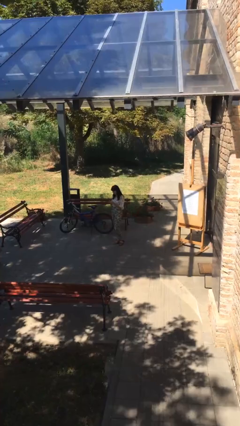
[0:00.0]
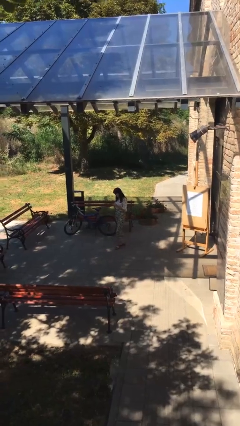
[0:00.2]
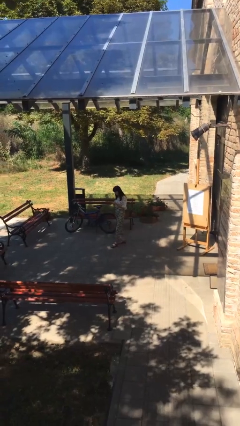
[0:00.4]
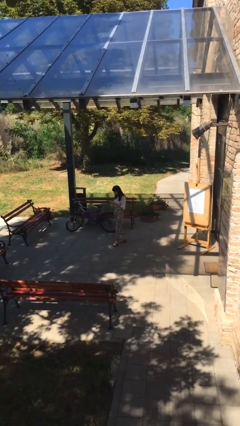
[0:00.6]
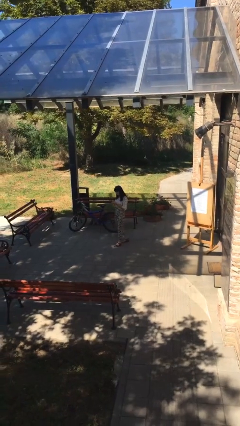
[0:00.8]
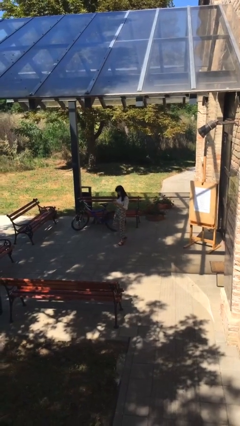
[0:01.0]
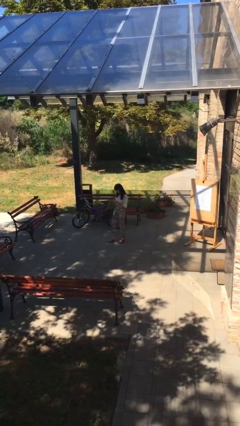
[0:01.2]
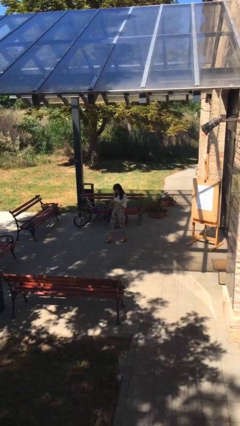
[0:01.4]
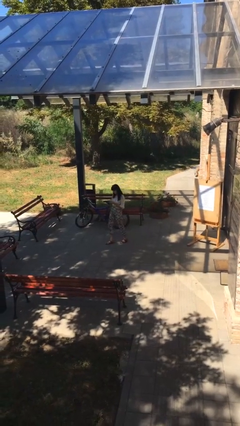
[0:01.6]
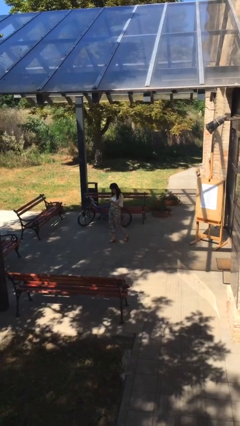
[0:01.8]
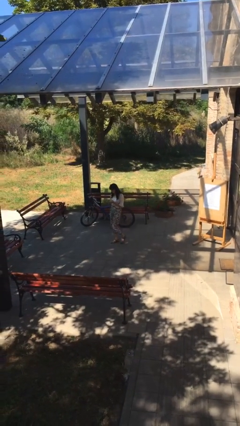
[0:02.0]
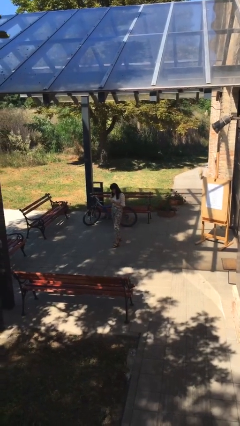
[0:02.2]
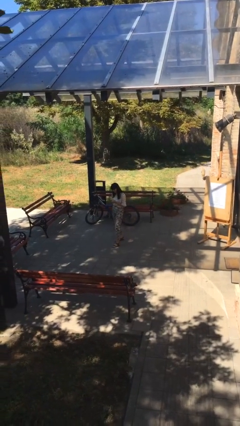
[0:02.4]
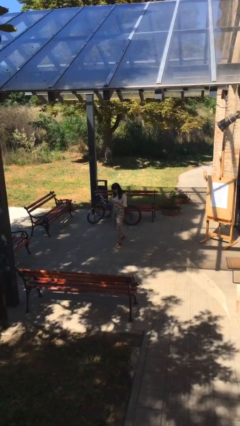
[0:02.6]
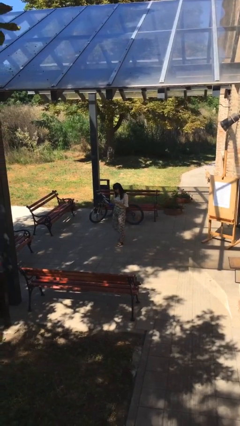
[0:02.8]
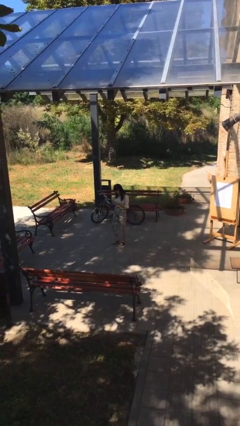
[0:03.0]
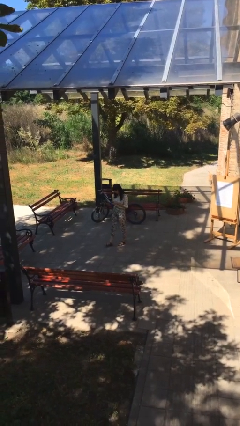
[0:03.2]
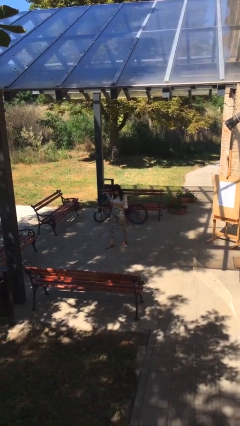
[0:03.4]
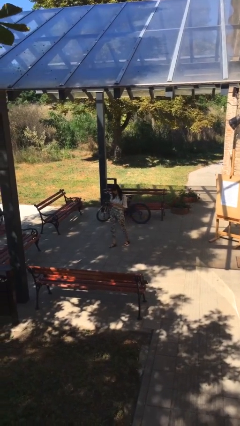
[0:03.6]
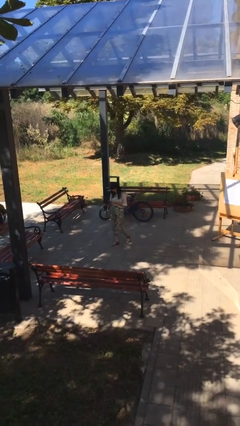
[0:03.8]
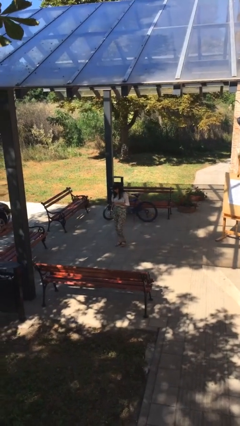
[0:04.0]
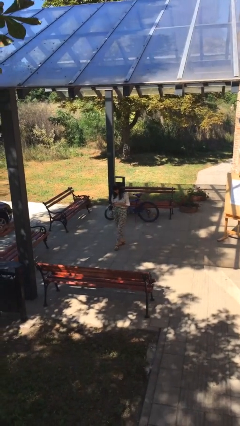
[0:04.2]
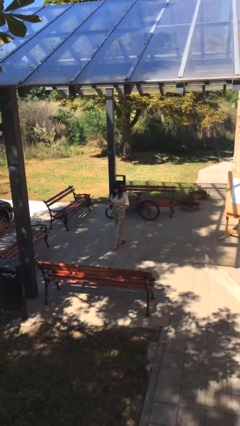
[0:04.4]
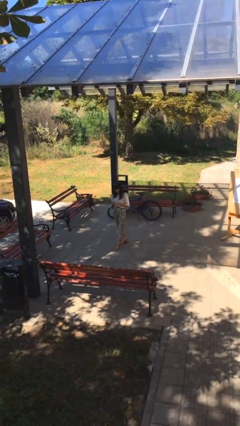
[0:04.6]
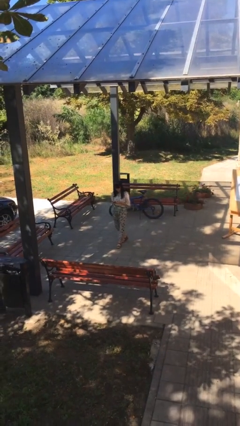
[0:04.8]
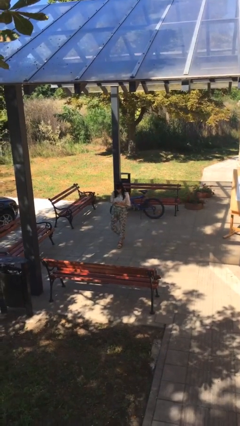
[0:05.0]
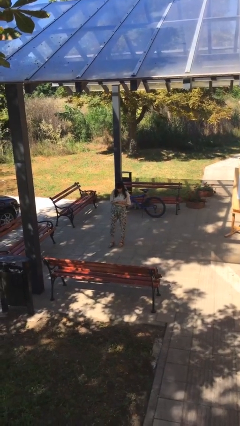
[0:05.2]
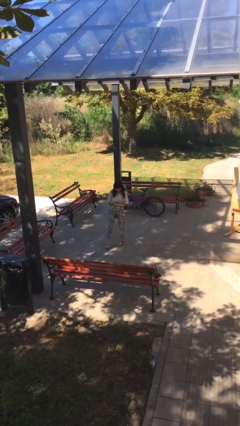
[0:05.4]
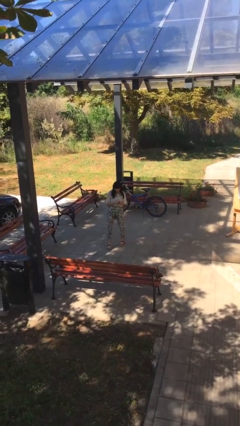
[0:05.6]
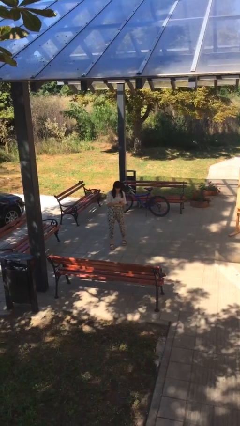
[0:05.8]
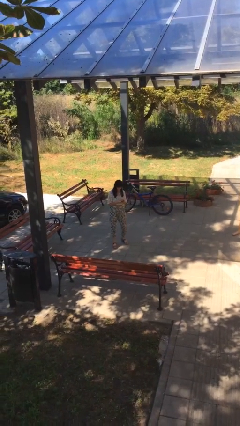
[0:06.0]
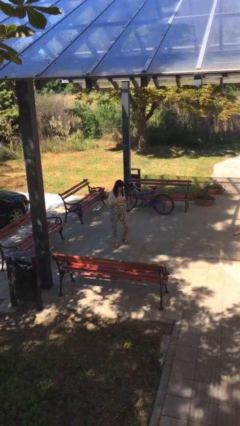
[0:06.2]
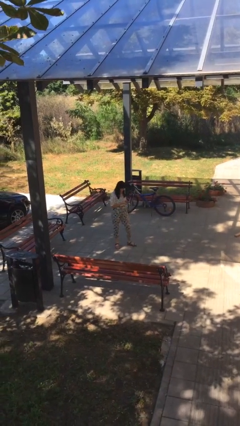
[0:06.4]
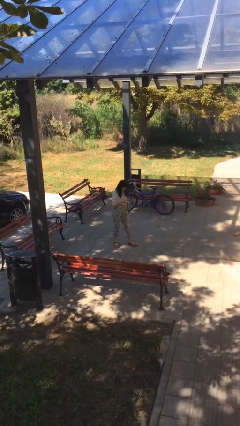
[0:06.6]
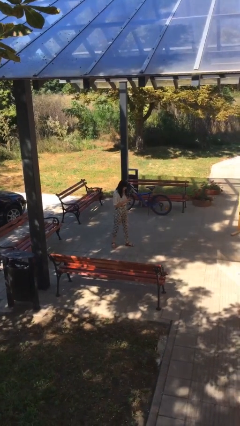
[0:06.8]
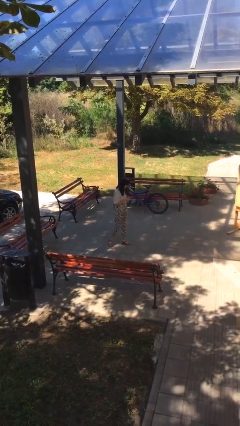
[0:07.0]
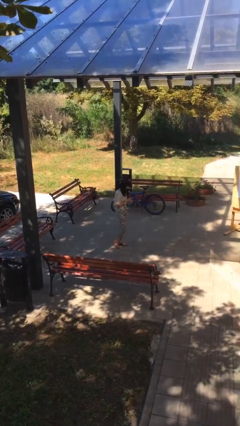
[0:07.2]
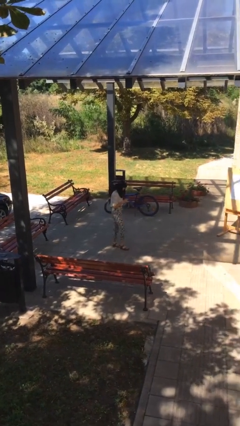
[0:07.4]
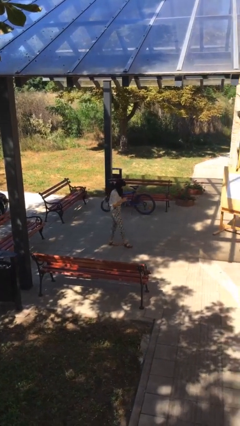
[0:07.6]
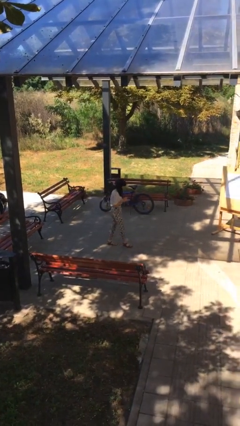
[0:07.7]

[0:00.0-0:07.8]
person texts on phone

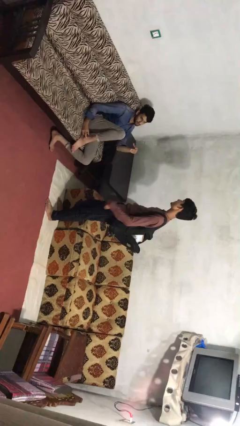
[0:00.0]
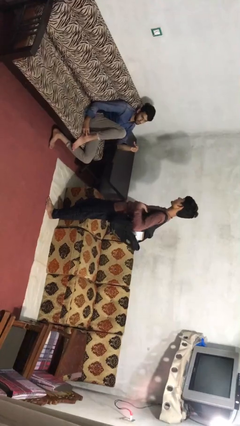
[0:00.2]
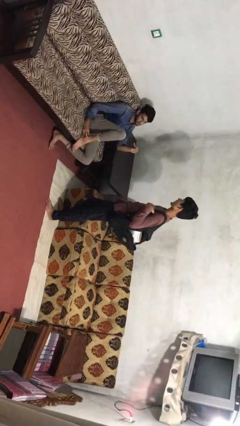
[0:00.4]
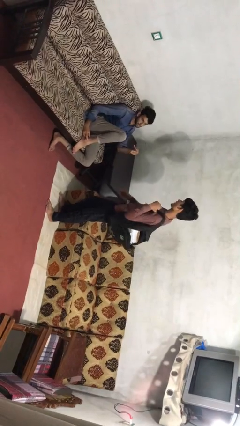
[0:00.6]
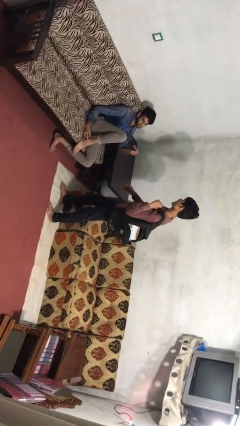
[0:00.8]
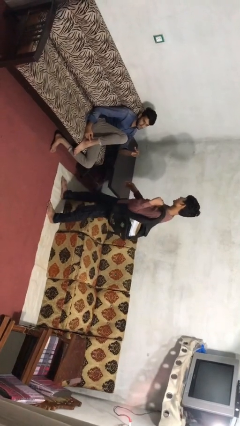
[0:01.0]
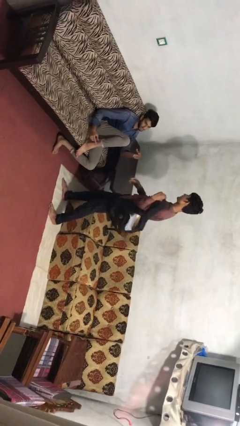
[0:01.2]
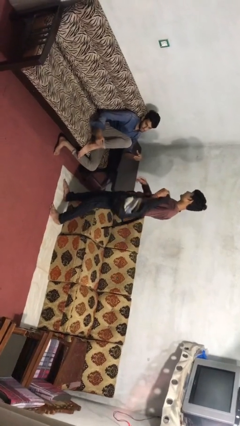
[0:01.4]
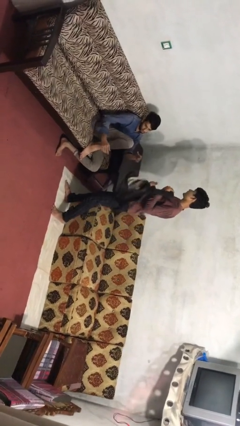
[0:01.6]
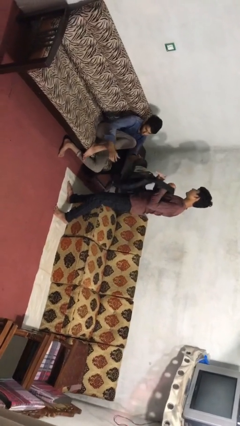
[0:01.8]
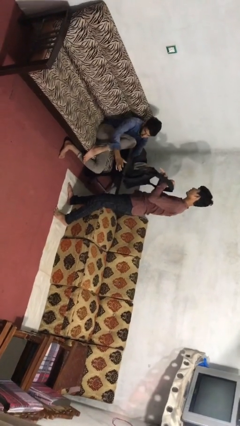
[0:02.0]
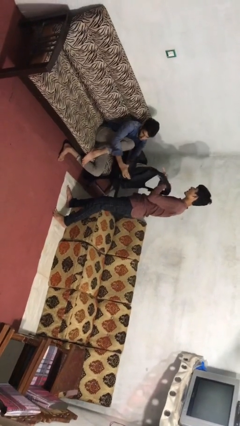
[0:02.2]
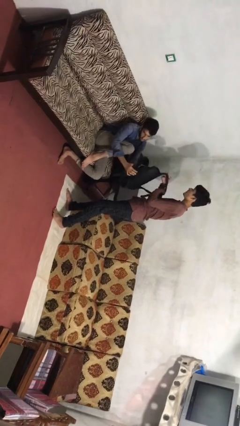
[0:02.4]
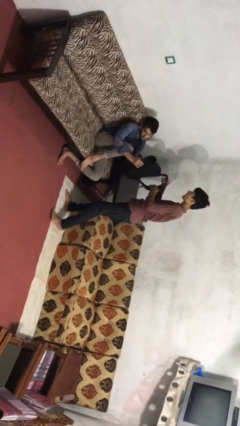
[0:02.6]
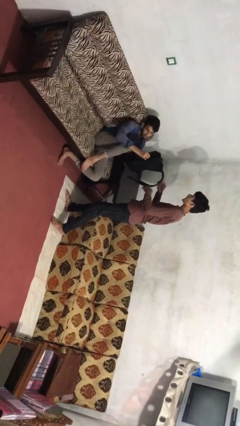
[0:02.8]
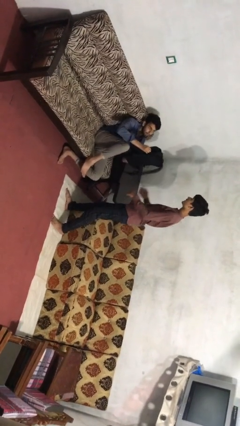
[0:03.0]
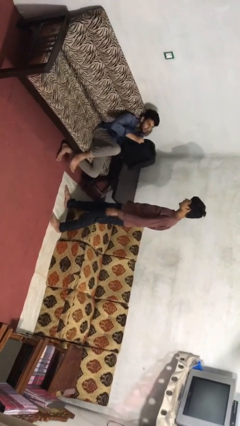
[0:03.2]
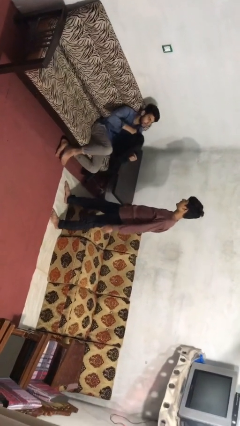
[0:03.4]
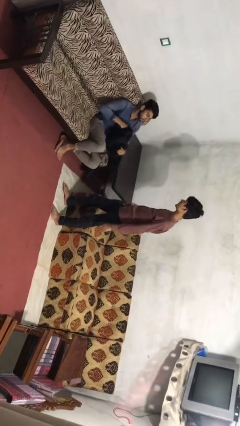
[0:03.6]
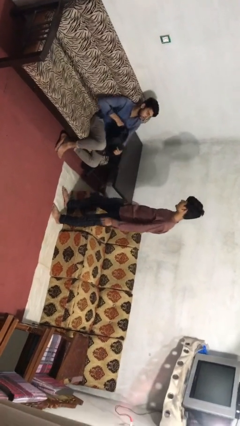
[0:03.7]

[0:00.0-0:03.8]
person transfers object to person

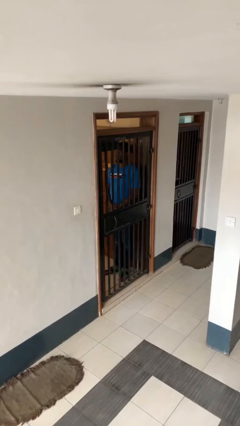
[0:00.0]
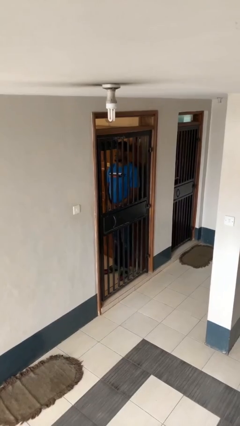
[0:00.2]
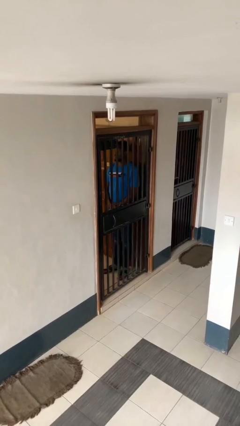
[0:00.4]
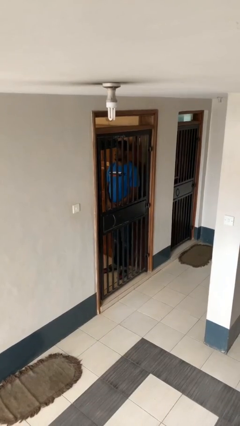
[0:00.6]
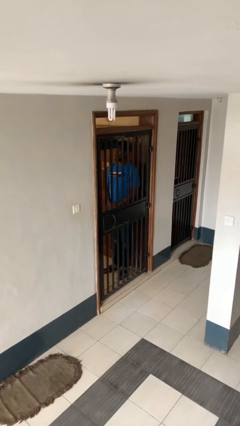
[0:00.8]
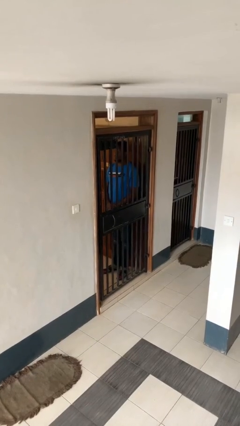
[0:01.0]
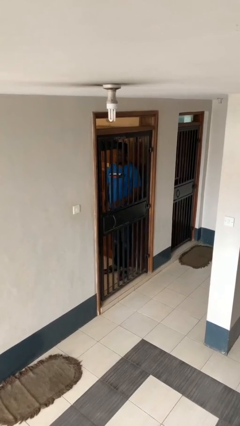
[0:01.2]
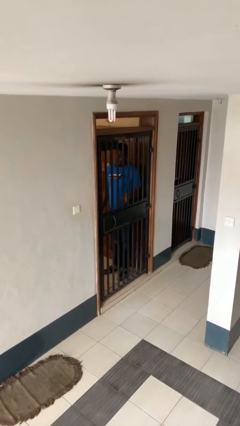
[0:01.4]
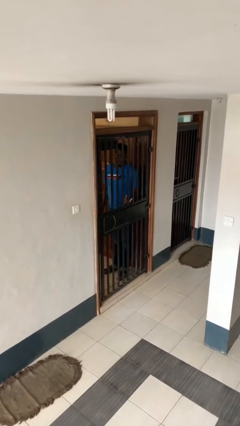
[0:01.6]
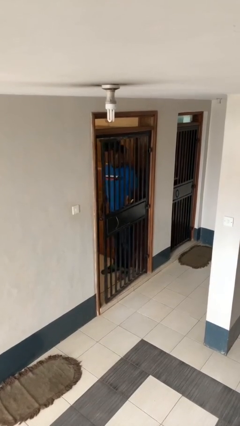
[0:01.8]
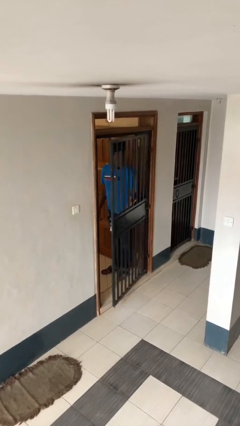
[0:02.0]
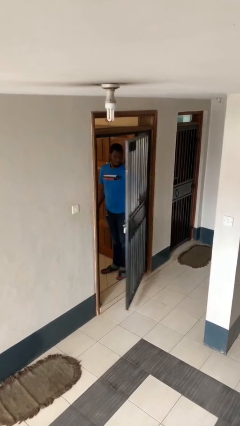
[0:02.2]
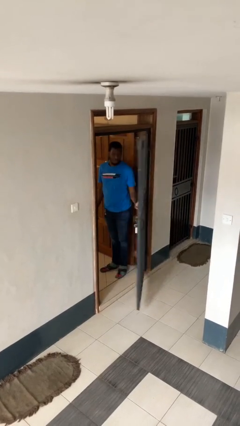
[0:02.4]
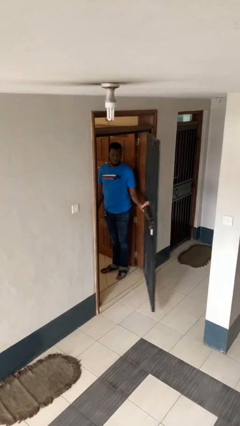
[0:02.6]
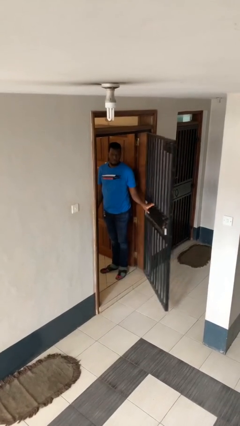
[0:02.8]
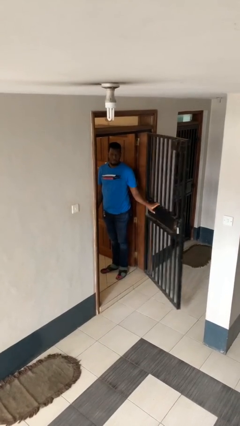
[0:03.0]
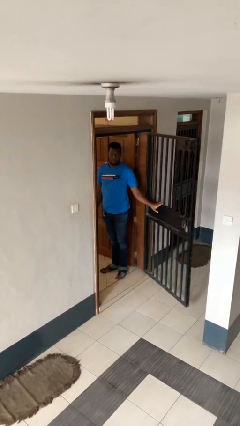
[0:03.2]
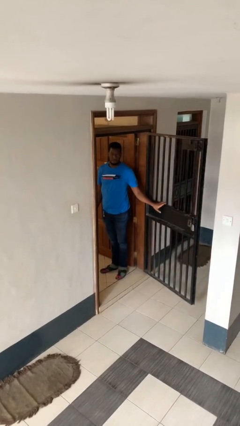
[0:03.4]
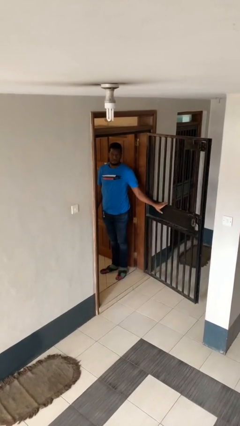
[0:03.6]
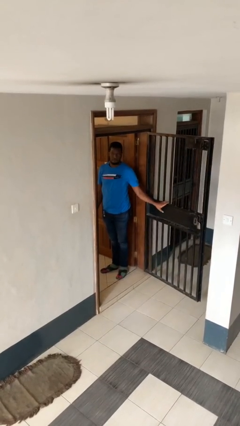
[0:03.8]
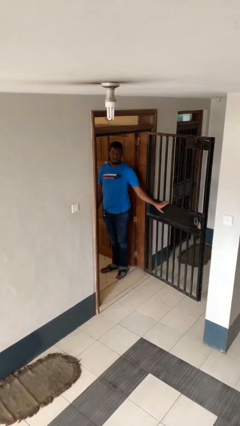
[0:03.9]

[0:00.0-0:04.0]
person opens facility door

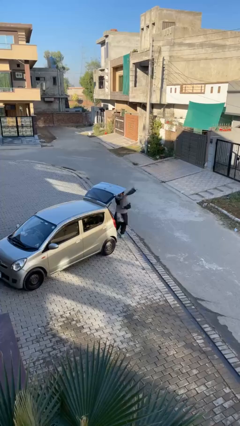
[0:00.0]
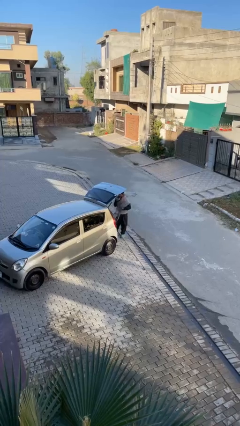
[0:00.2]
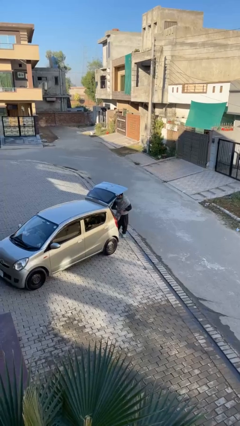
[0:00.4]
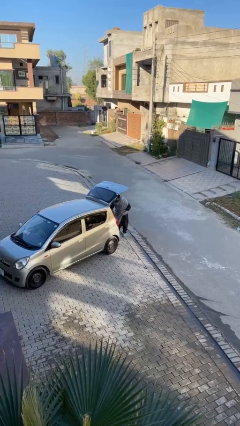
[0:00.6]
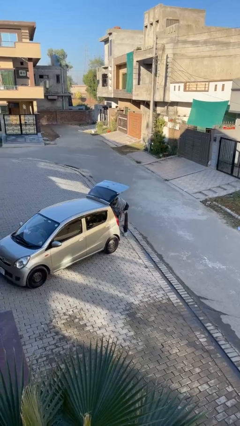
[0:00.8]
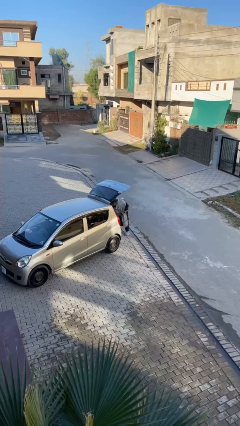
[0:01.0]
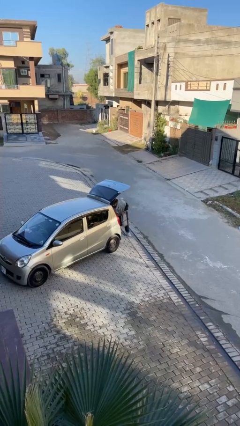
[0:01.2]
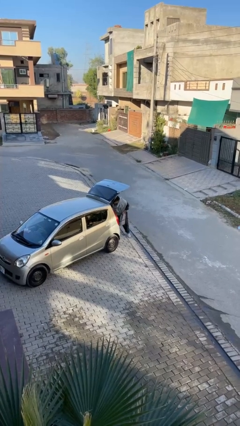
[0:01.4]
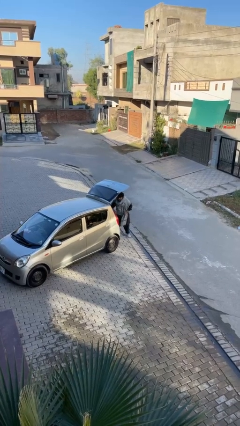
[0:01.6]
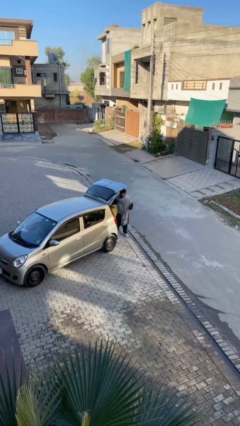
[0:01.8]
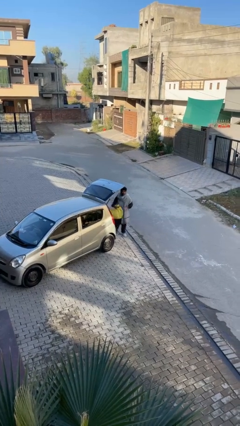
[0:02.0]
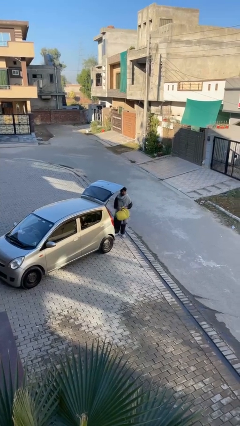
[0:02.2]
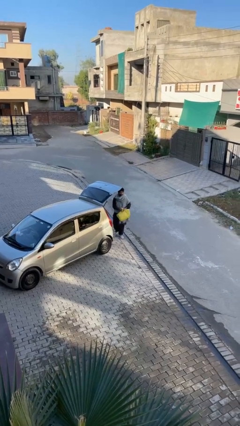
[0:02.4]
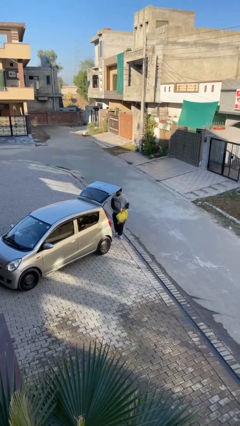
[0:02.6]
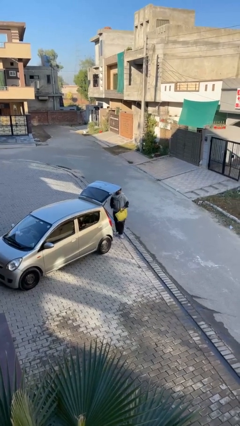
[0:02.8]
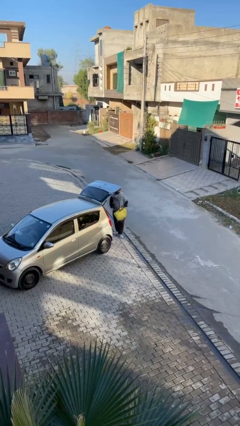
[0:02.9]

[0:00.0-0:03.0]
person unloads car
